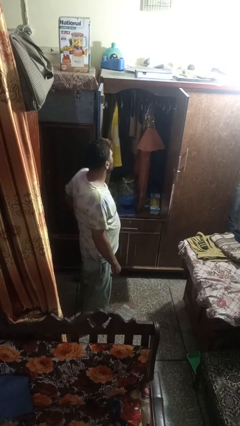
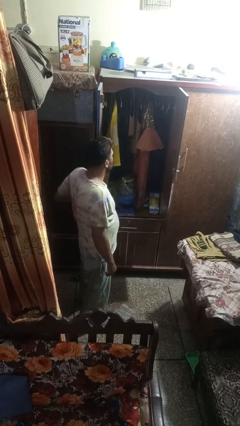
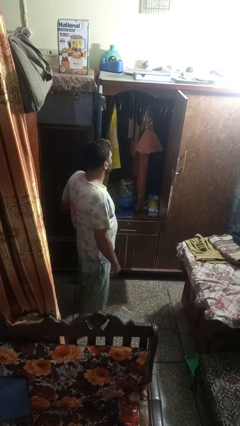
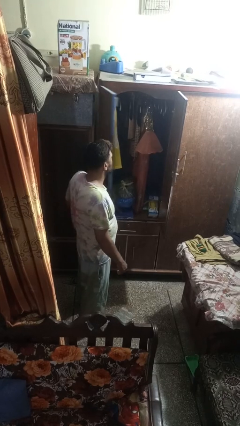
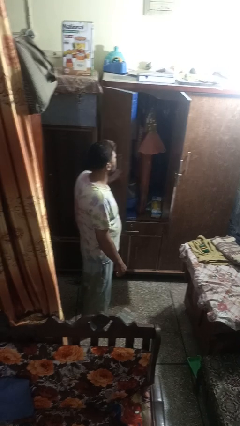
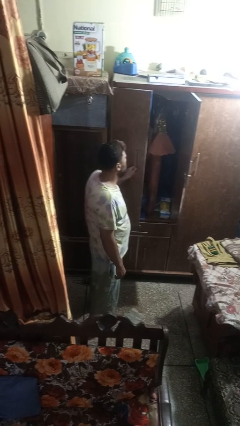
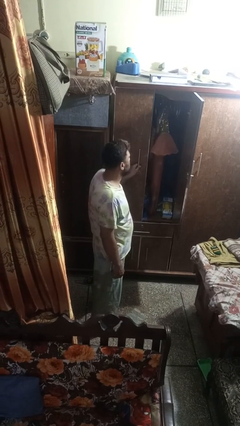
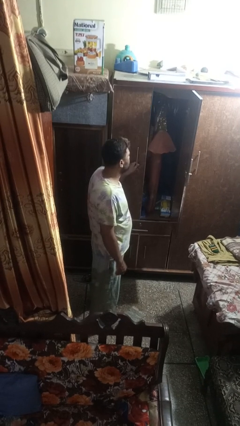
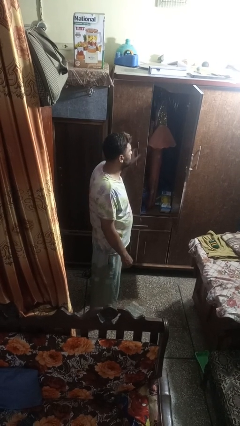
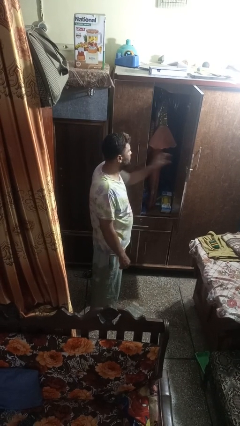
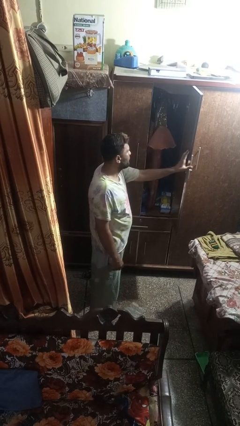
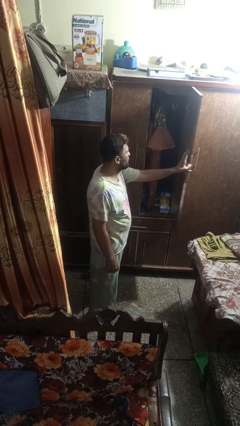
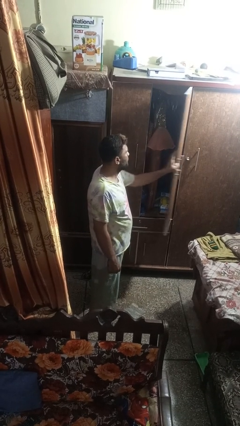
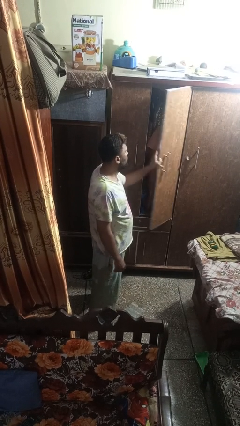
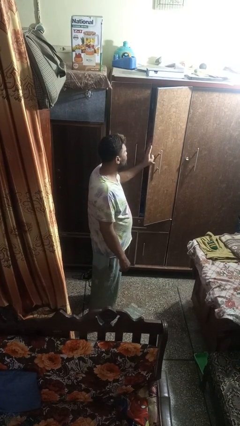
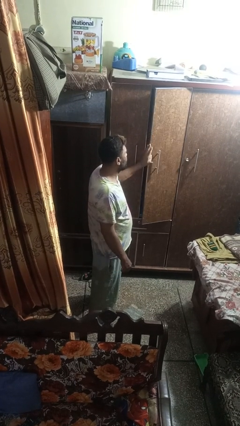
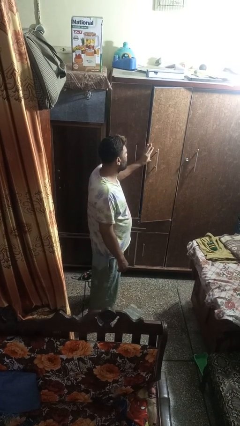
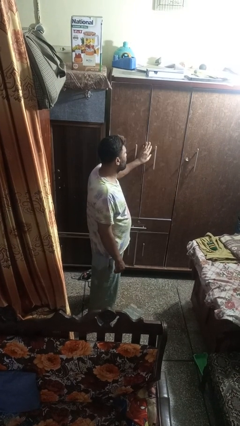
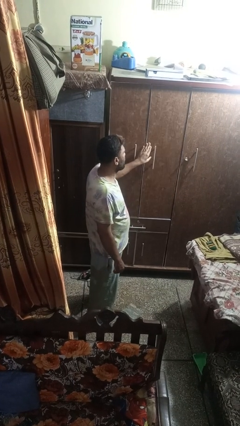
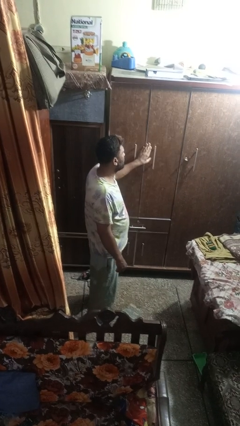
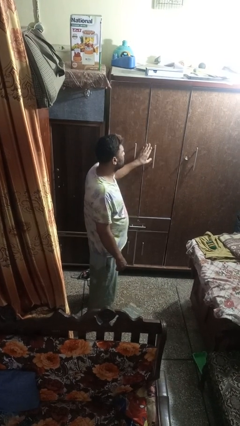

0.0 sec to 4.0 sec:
person closes closet door

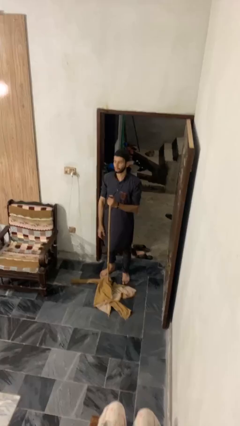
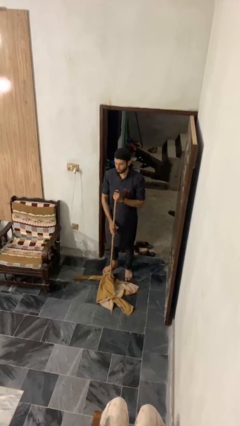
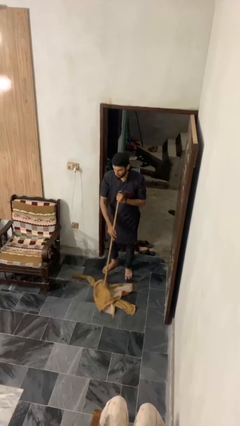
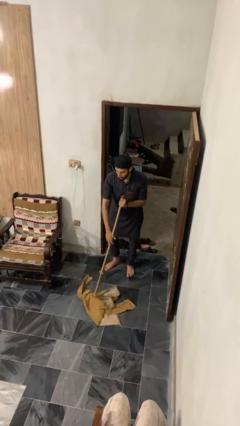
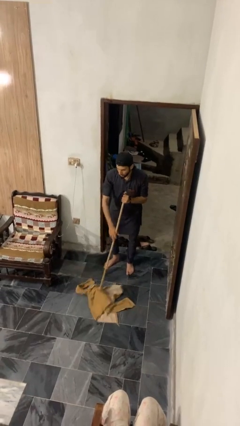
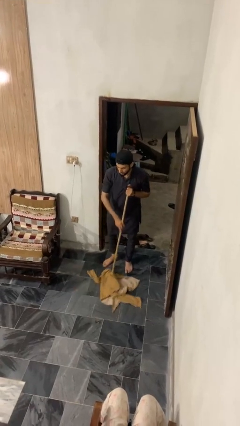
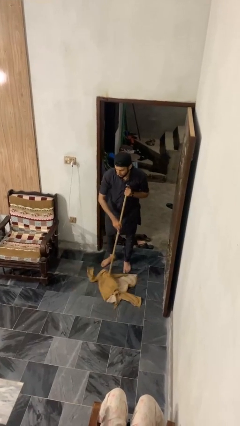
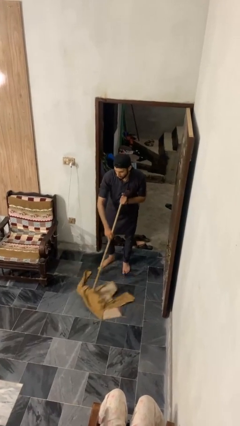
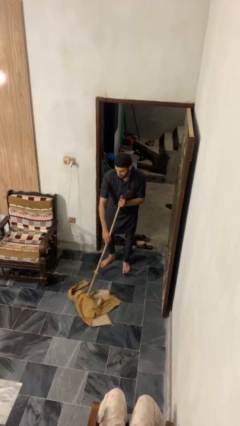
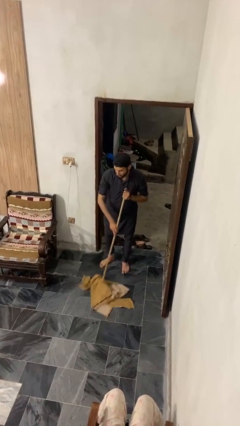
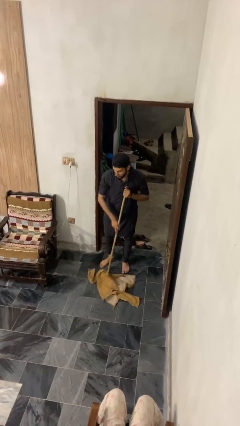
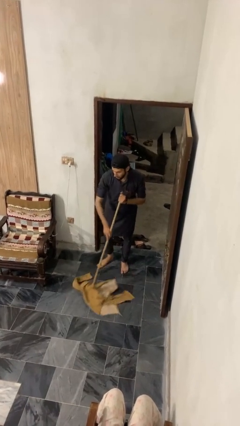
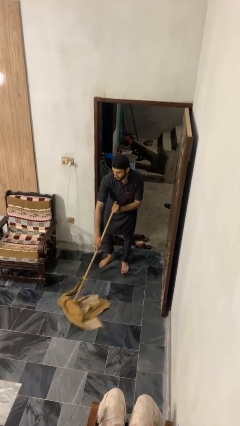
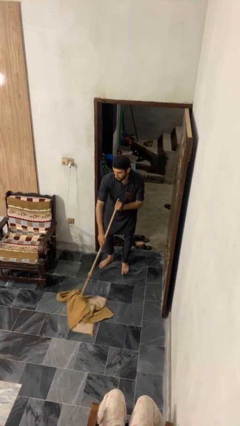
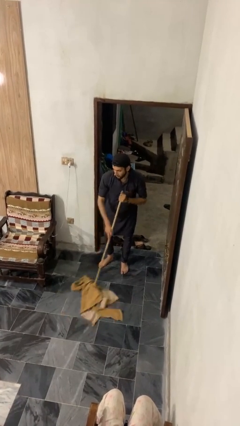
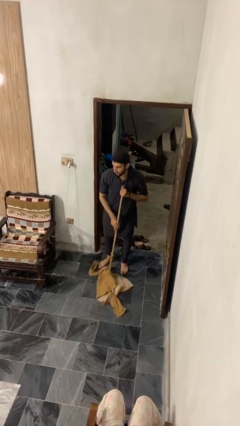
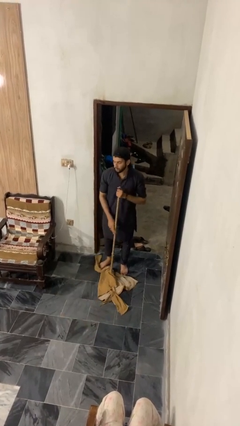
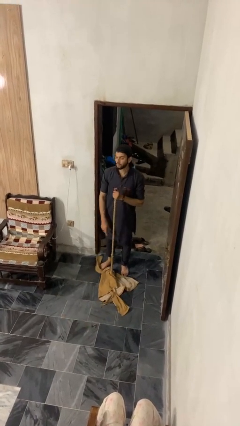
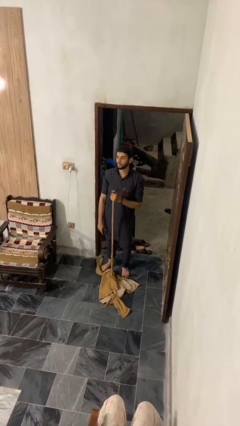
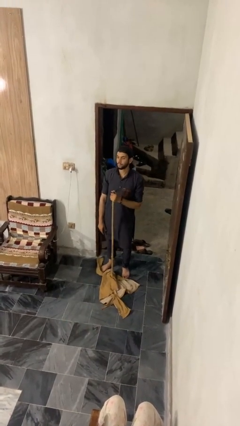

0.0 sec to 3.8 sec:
person mops

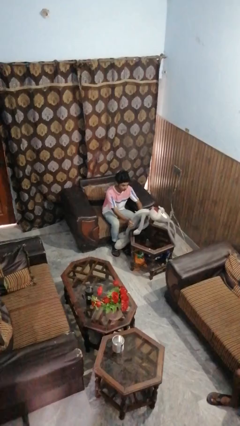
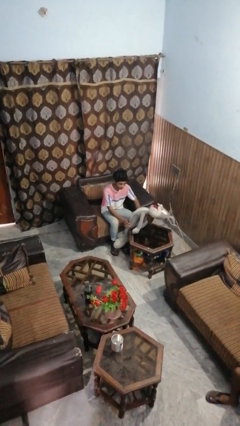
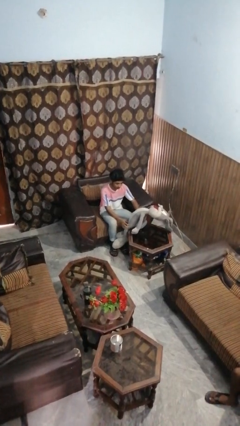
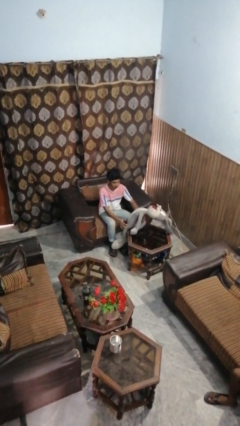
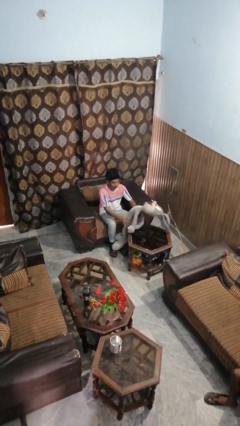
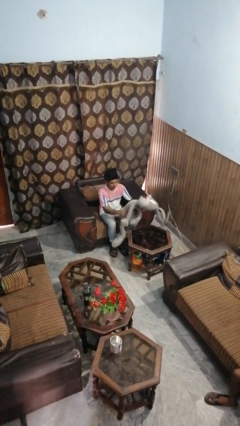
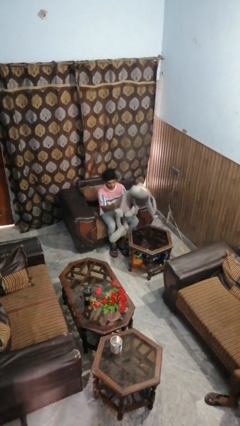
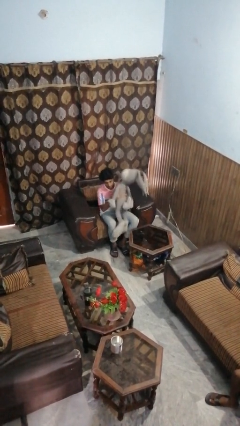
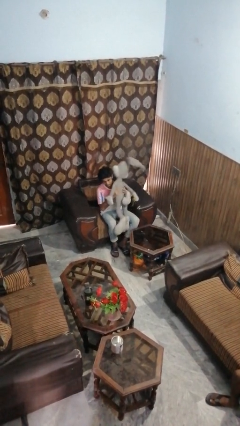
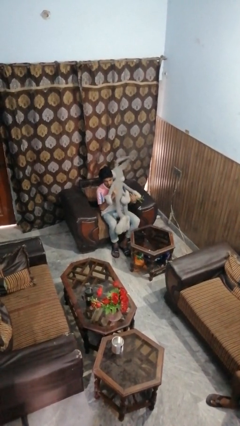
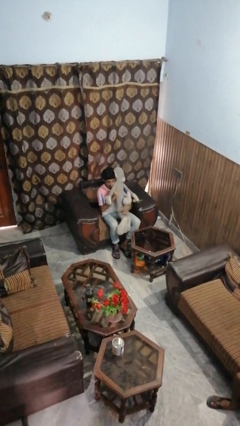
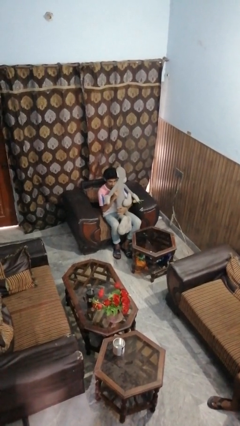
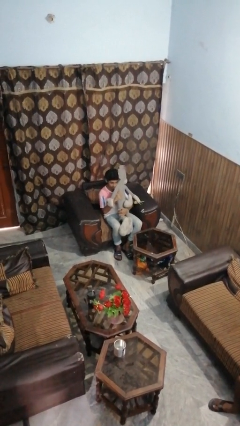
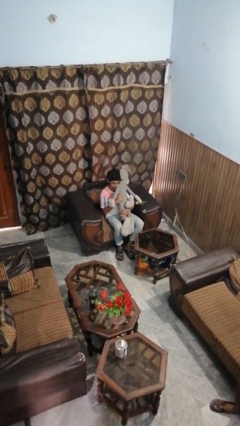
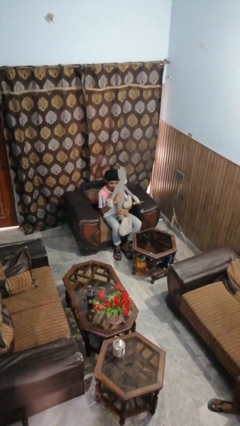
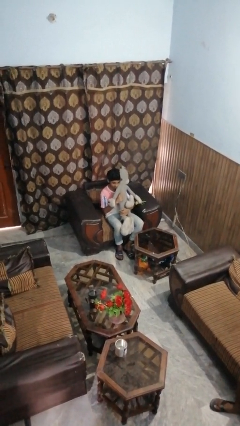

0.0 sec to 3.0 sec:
person hugs stuffed animal

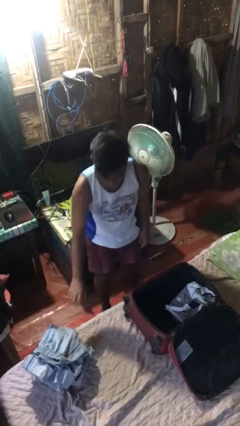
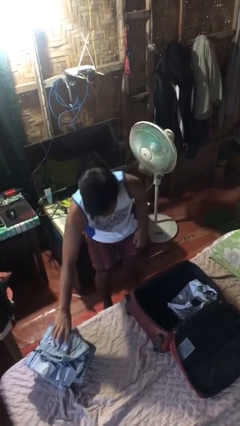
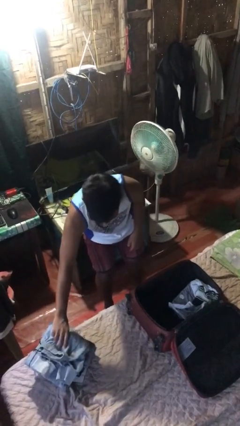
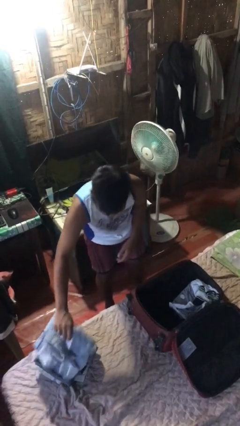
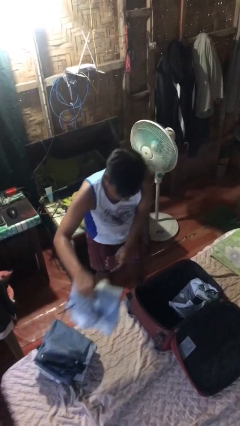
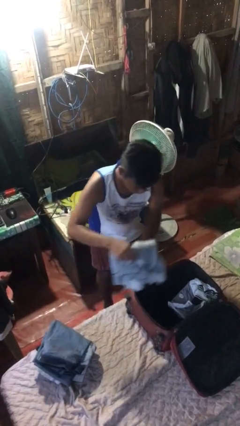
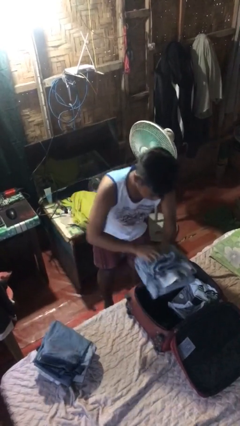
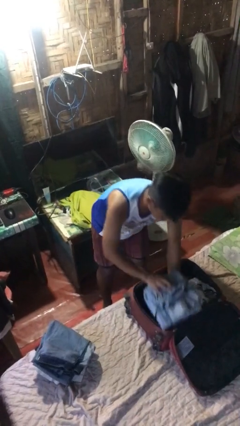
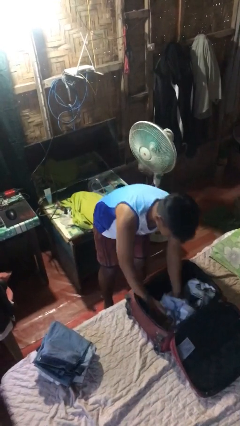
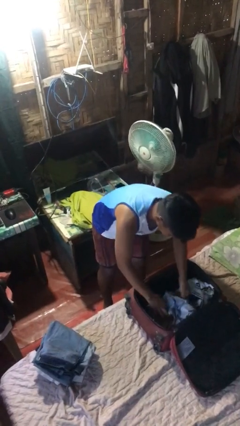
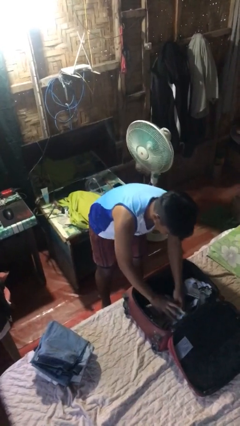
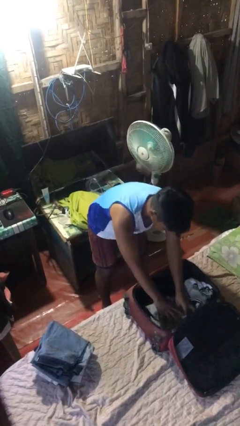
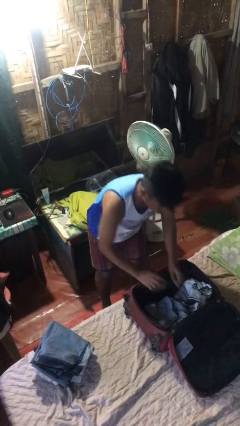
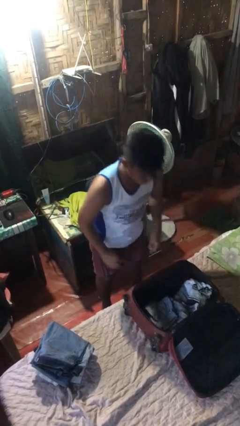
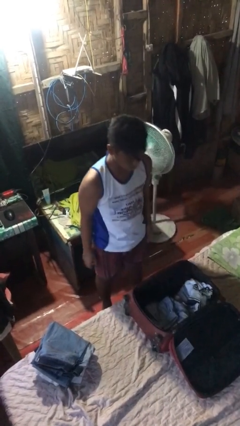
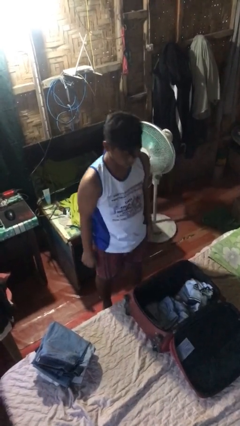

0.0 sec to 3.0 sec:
person loads clothes into suitcase

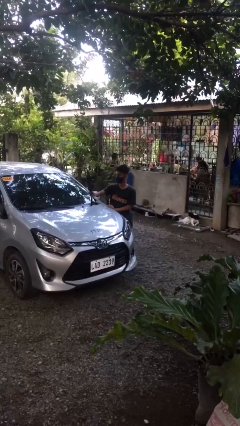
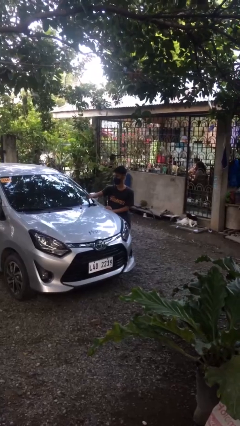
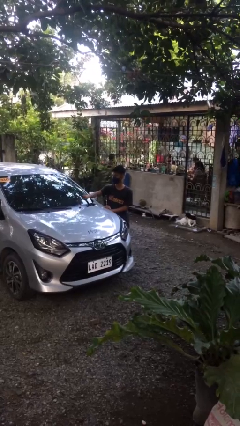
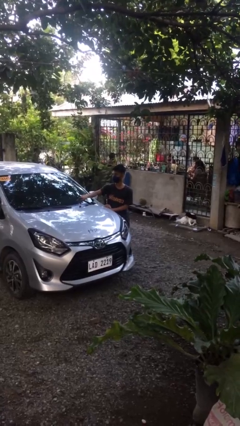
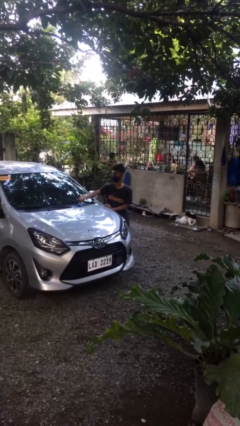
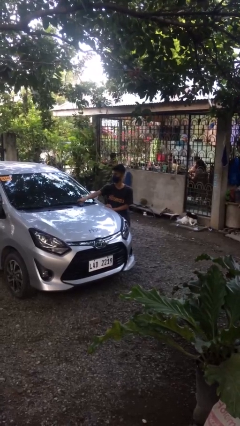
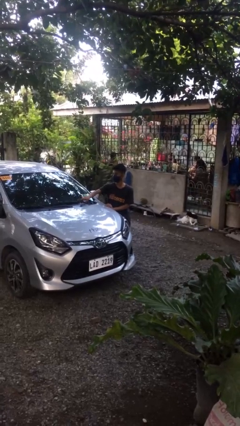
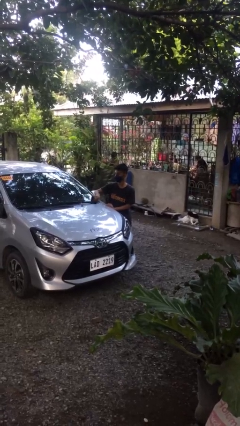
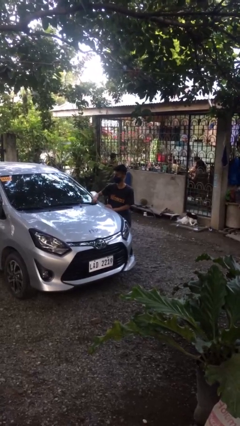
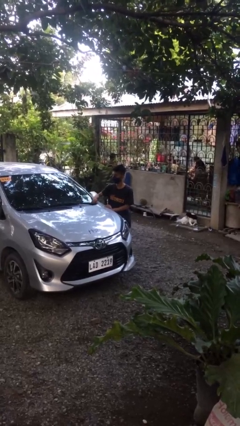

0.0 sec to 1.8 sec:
person flips down car wipers

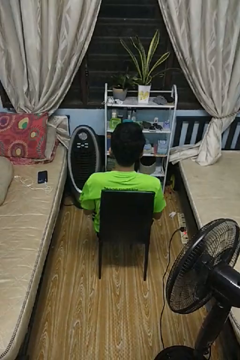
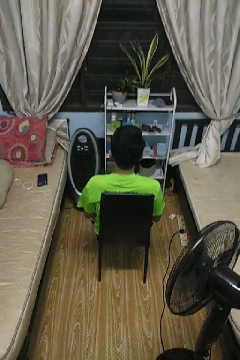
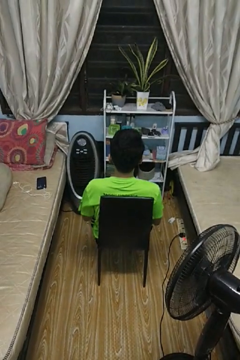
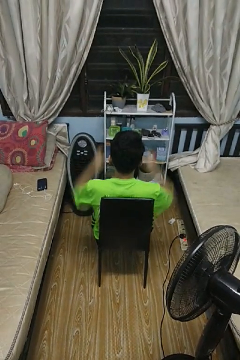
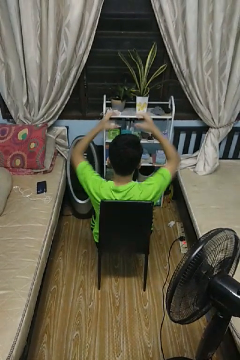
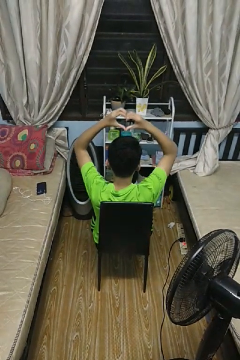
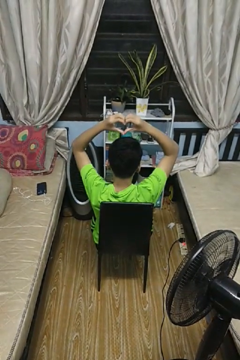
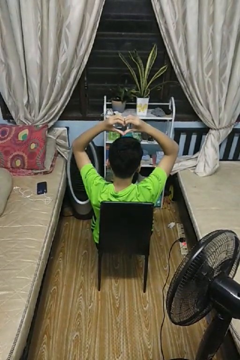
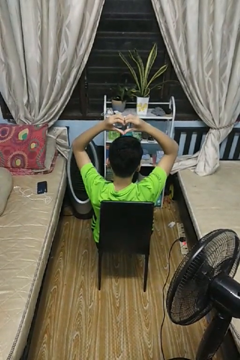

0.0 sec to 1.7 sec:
person gestures heart

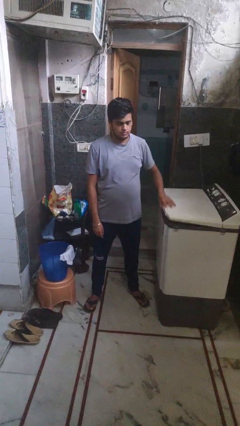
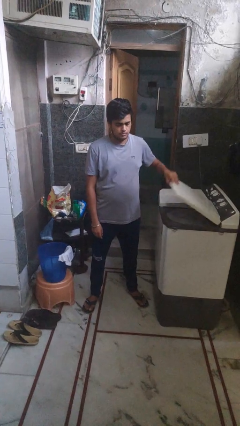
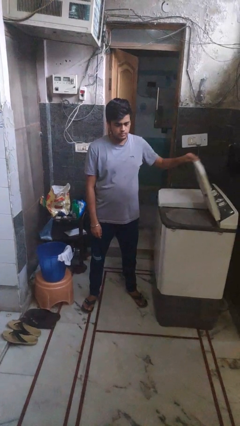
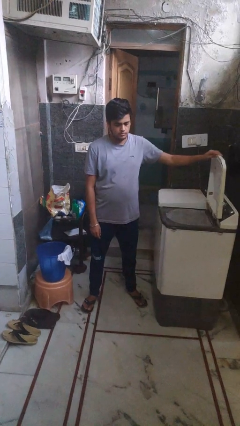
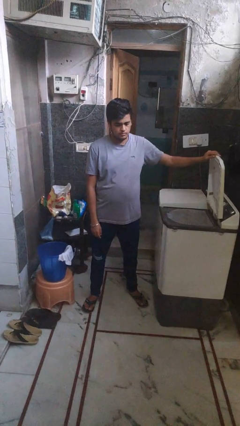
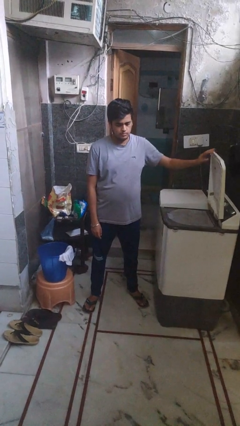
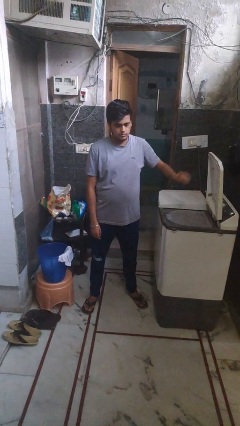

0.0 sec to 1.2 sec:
person opens clothes washer
